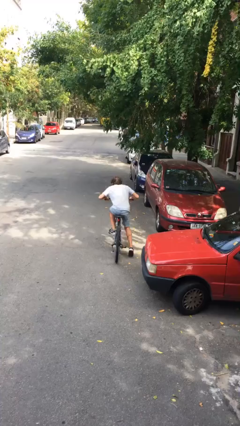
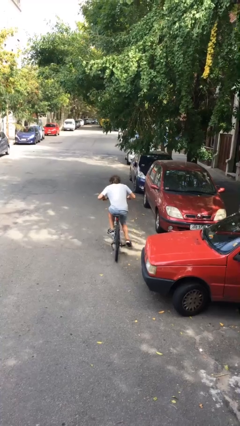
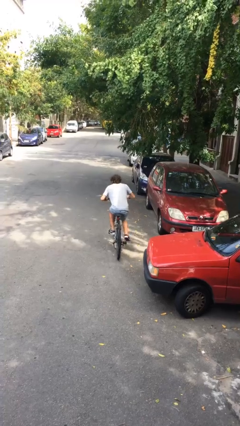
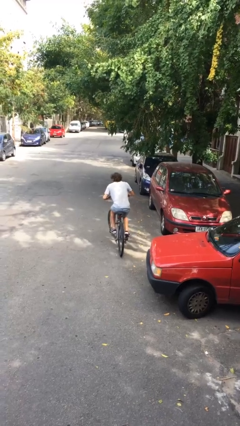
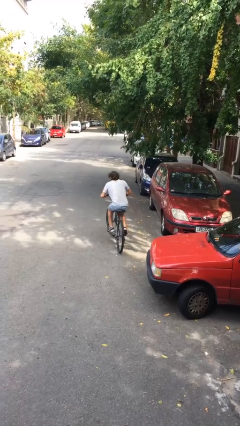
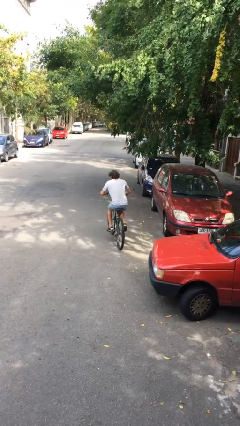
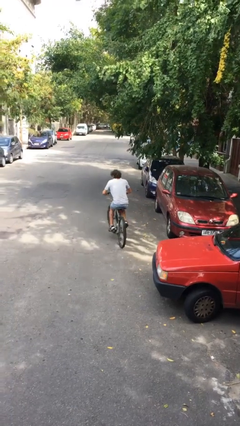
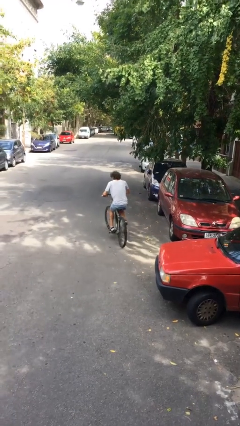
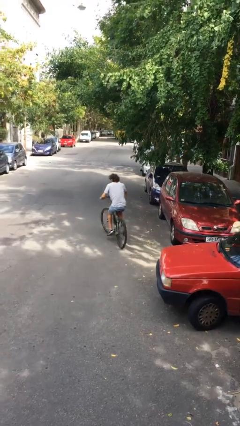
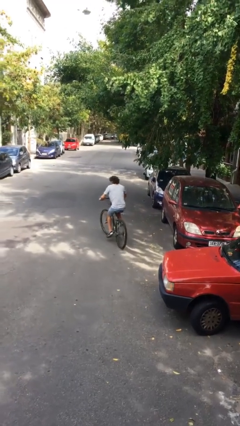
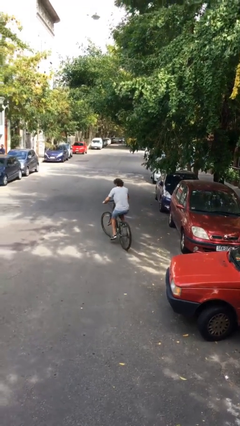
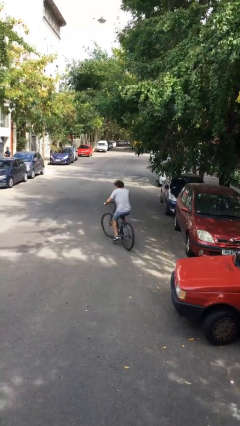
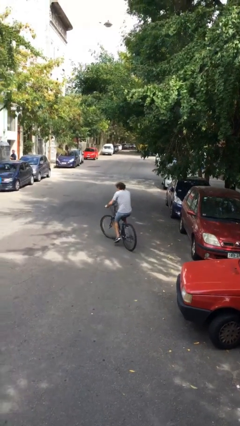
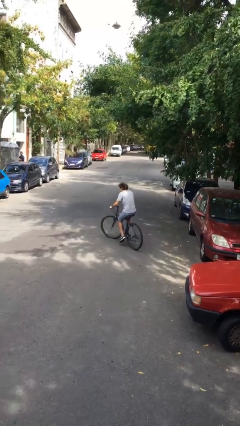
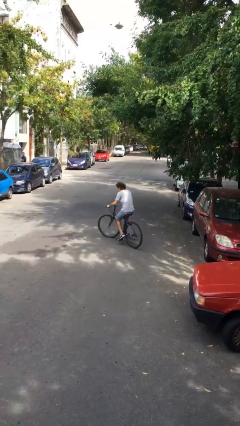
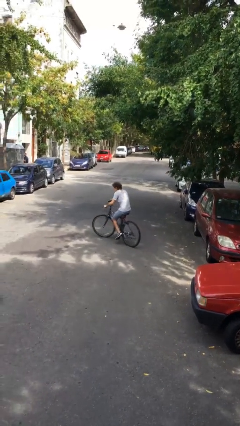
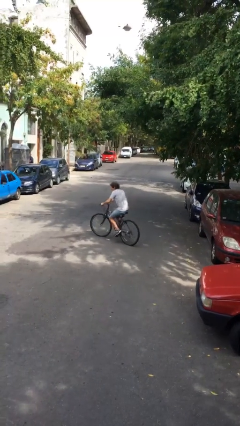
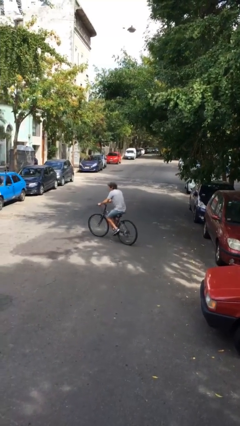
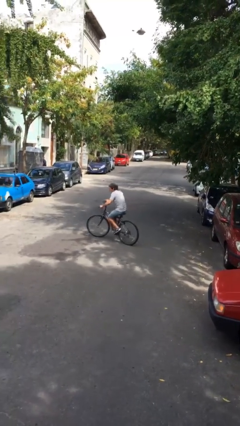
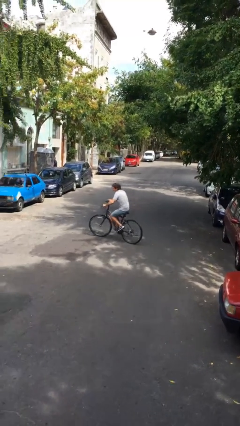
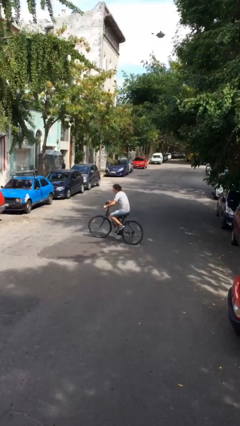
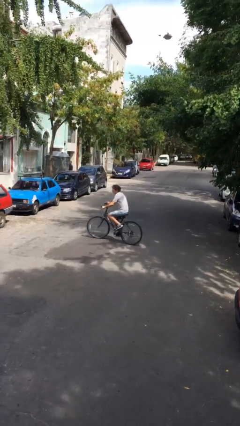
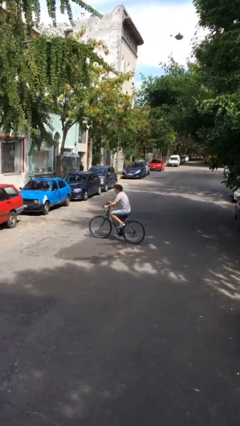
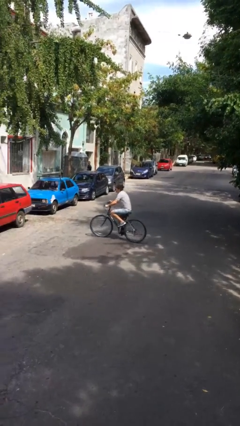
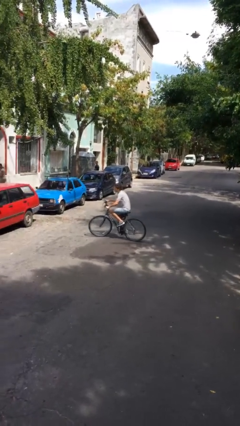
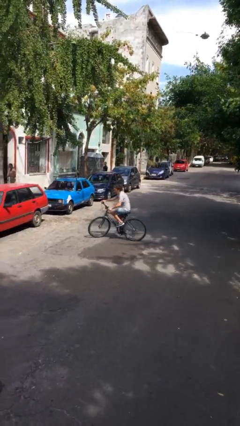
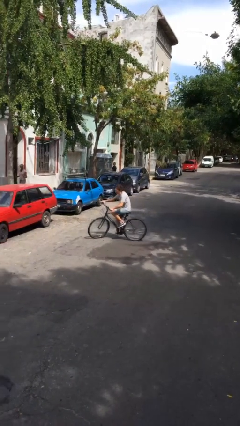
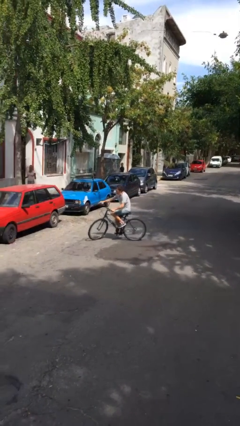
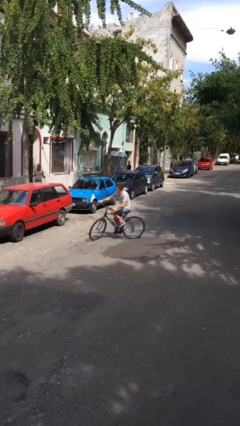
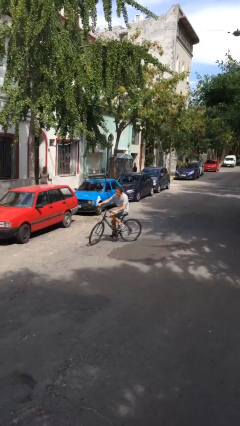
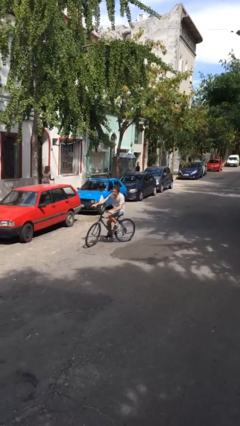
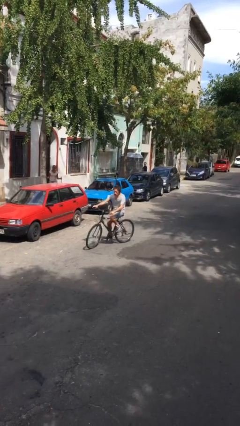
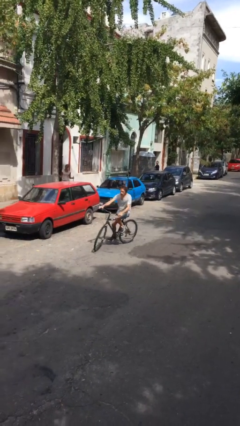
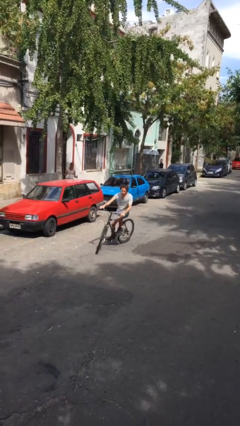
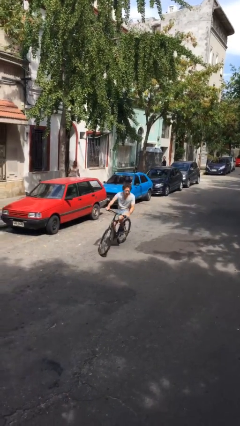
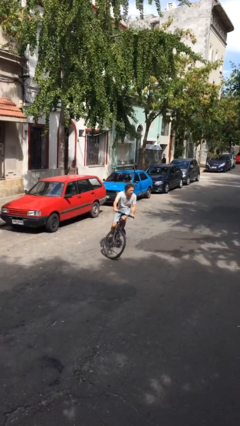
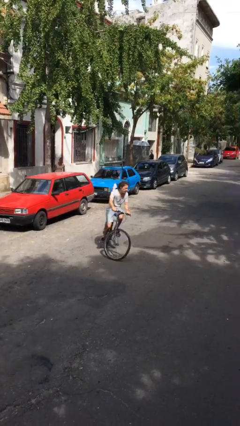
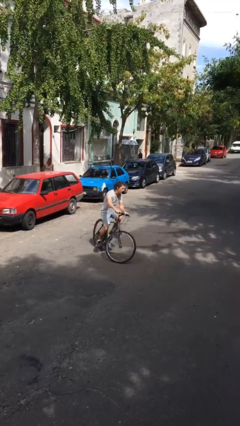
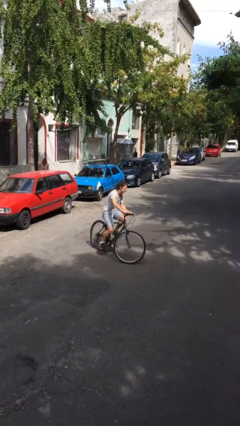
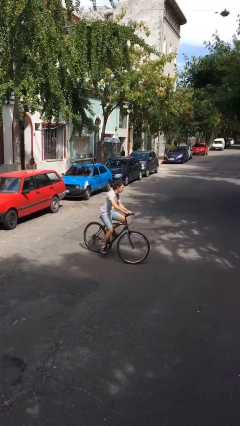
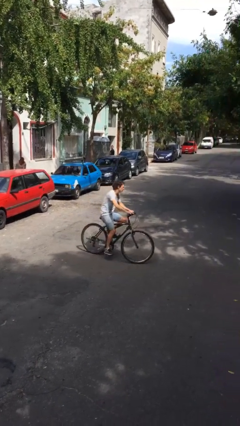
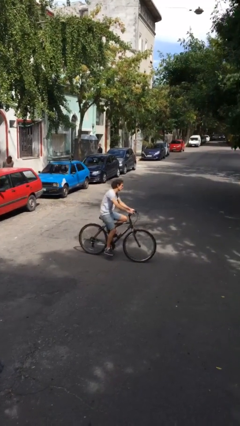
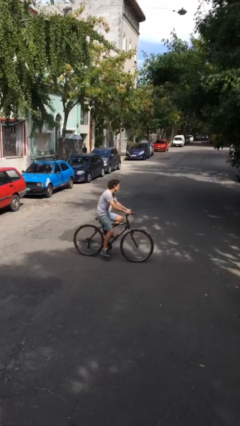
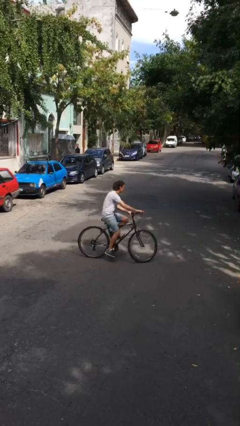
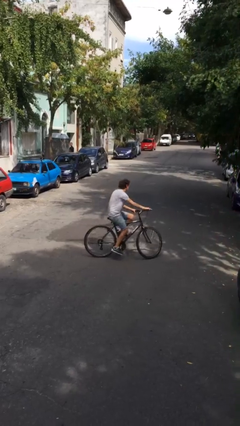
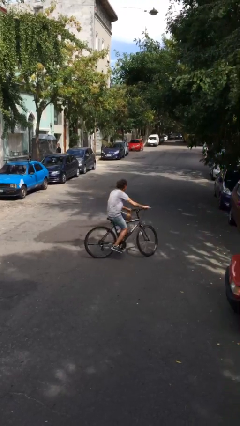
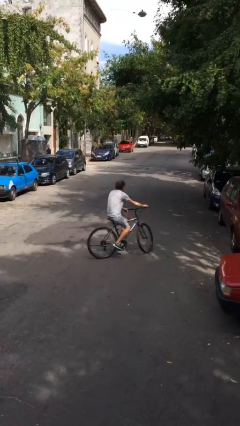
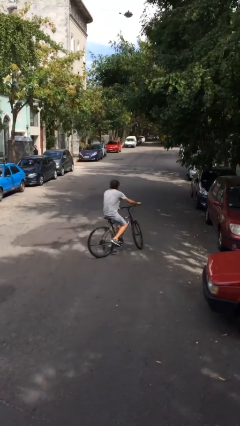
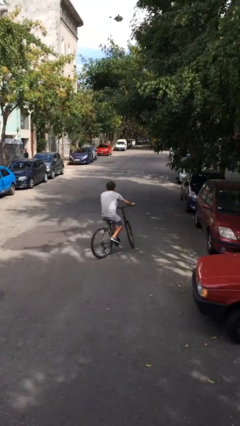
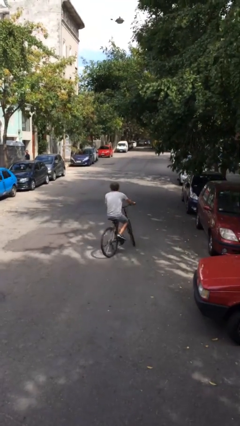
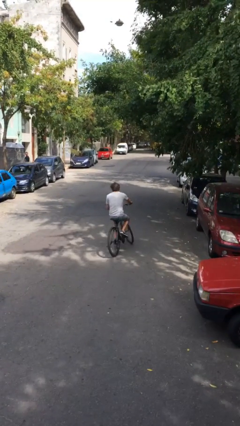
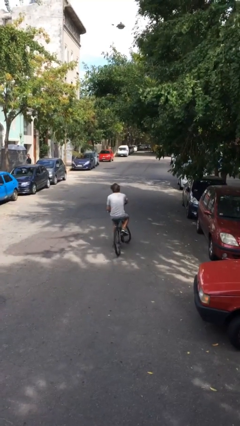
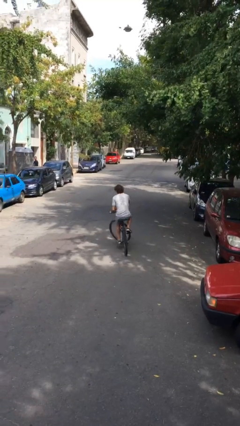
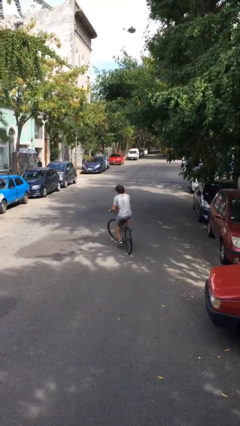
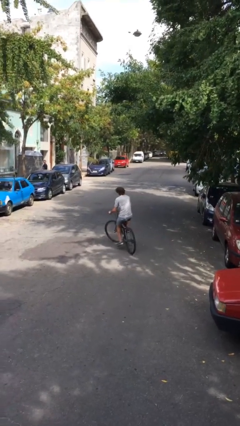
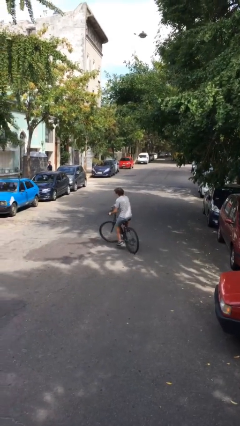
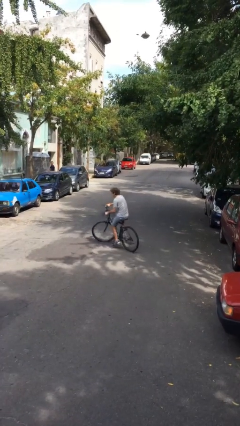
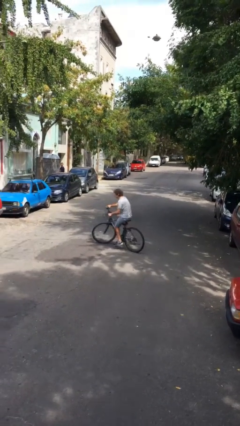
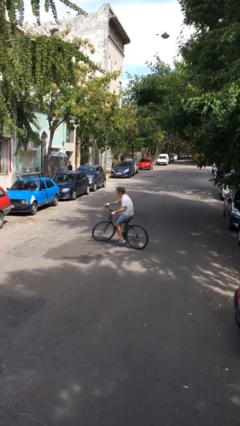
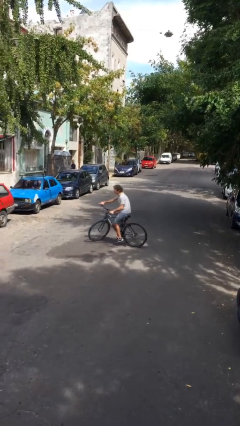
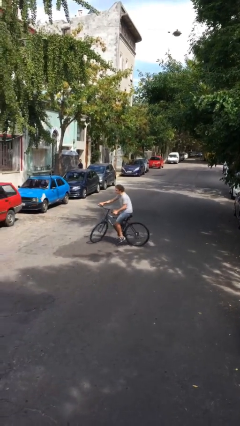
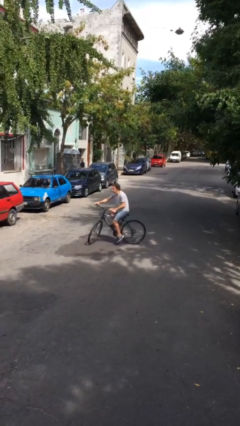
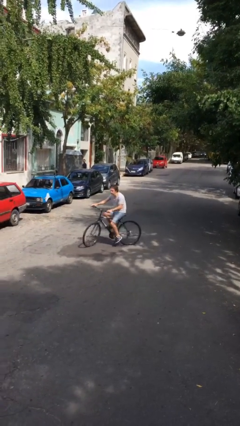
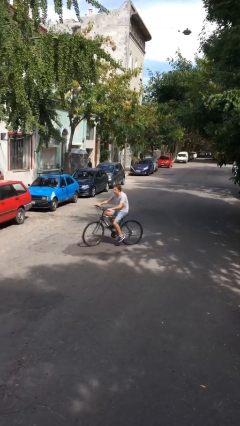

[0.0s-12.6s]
person rides bicycle

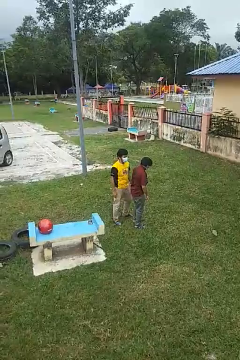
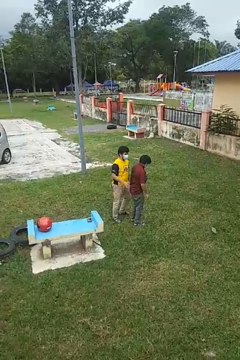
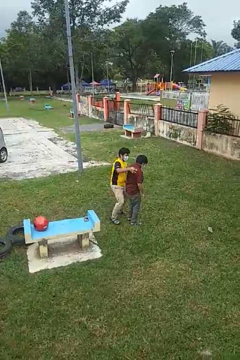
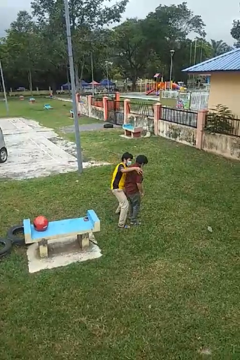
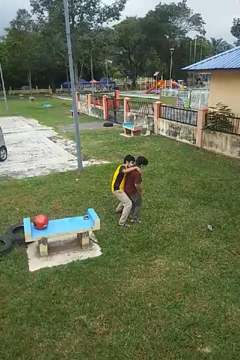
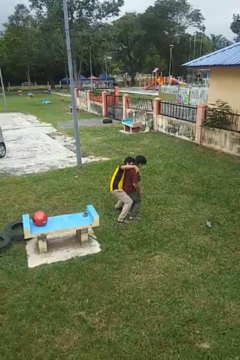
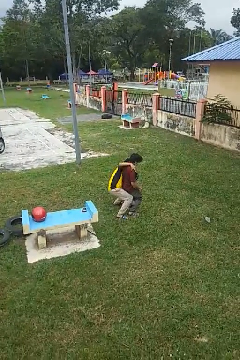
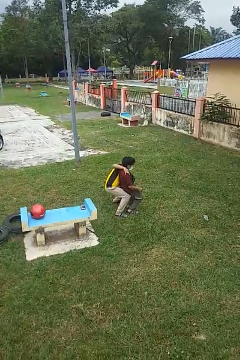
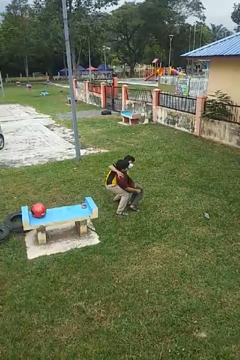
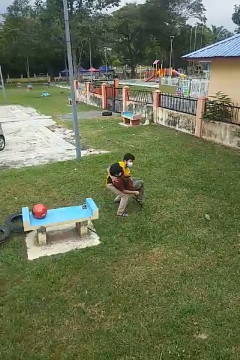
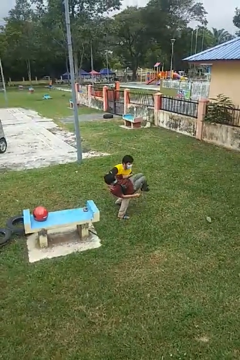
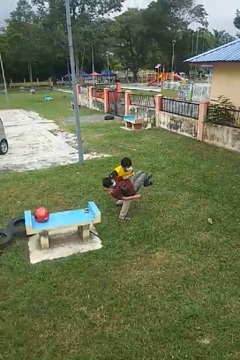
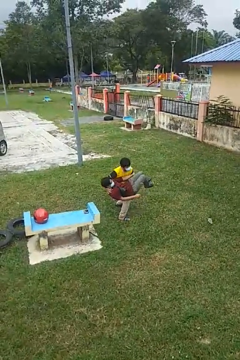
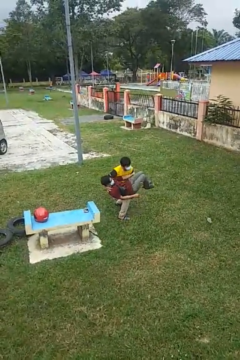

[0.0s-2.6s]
person picks up person

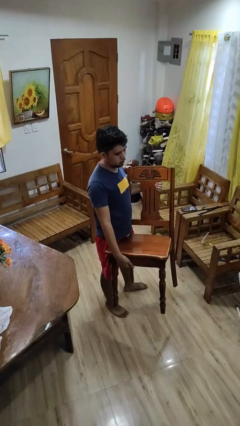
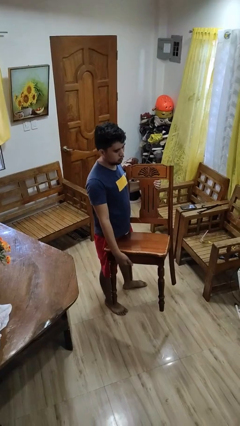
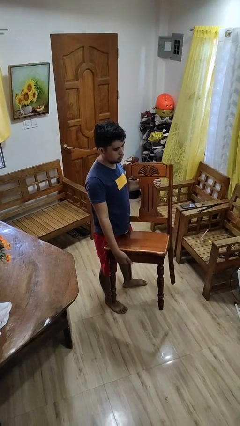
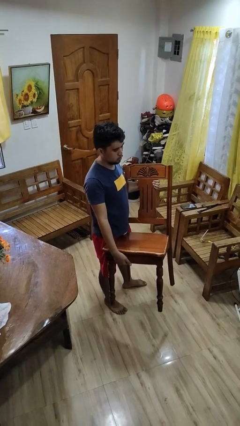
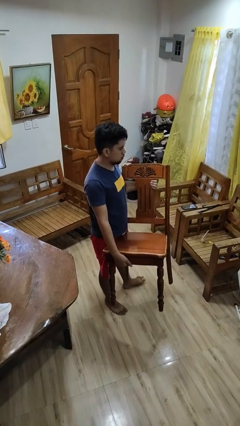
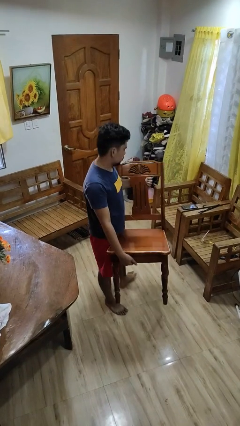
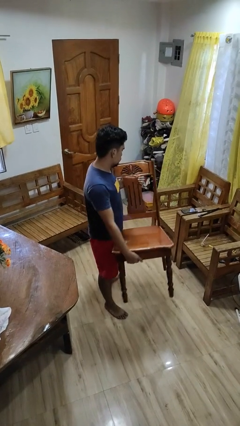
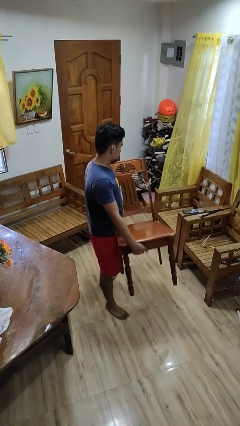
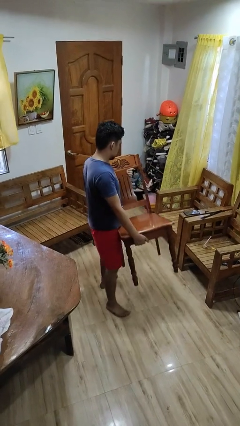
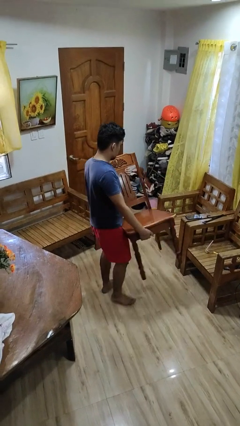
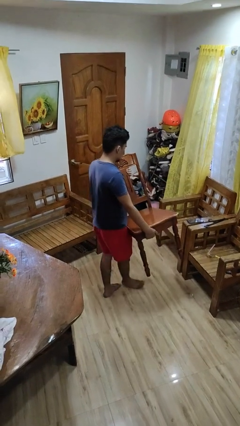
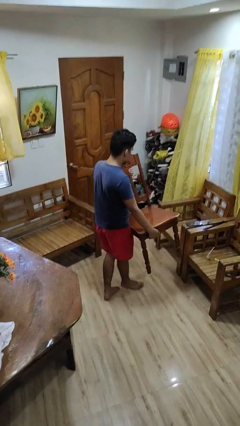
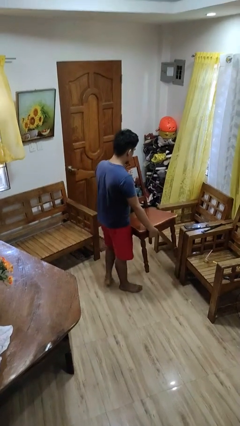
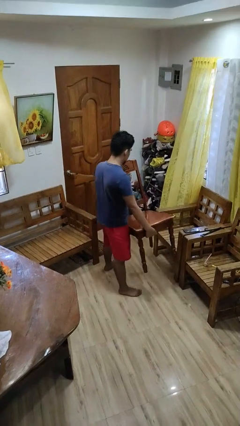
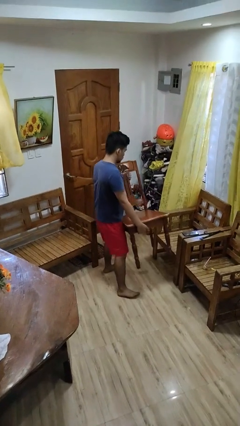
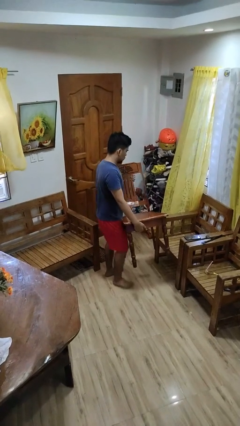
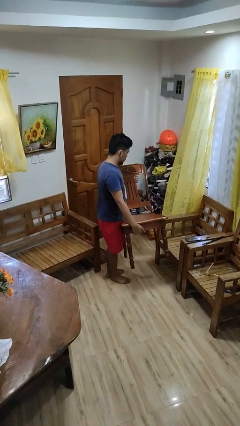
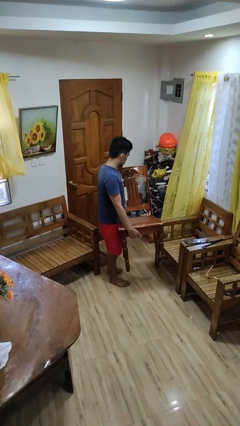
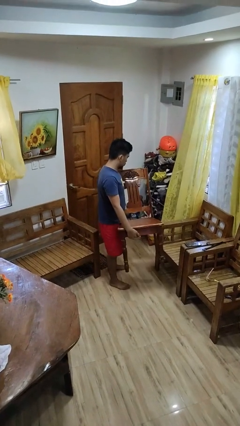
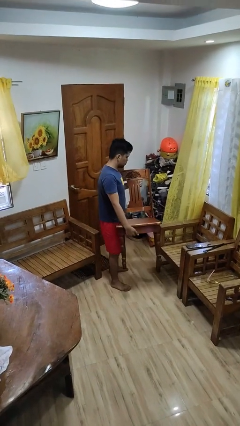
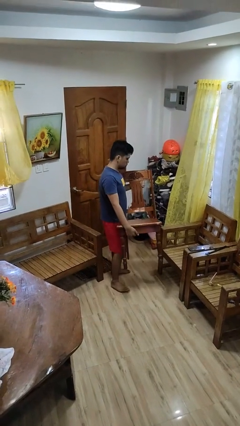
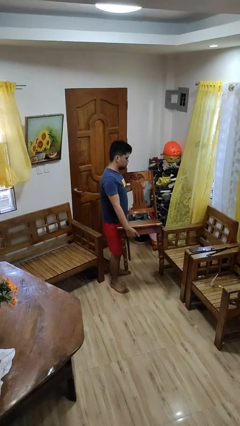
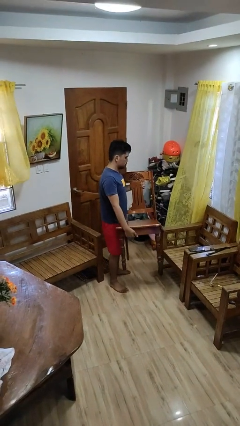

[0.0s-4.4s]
person carries furniture
